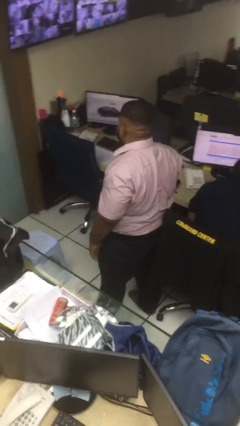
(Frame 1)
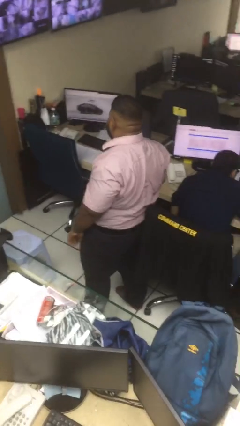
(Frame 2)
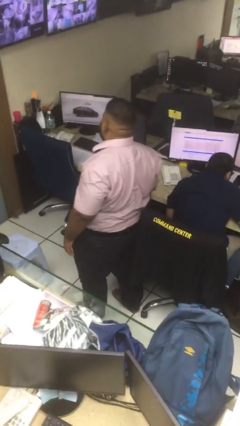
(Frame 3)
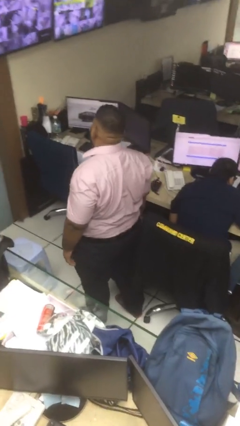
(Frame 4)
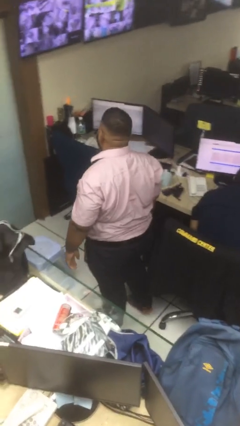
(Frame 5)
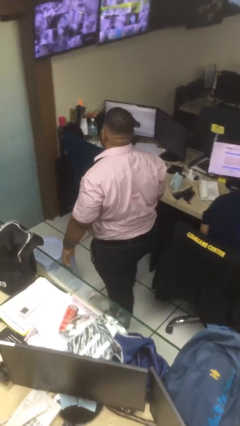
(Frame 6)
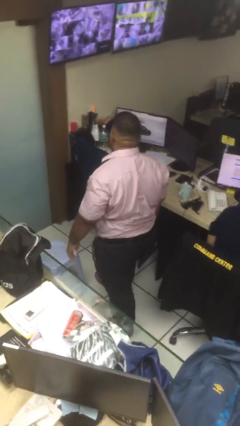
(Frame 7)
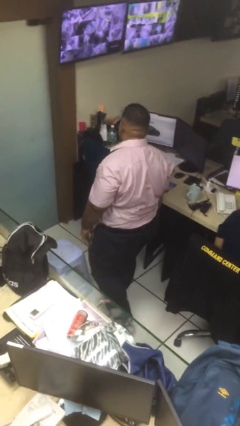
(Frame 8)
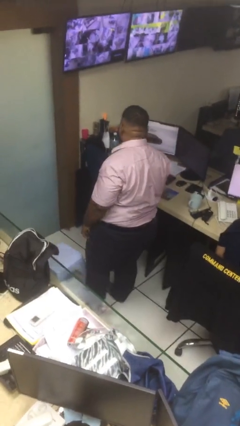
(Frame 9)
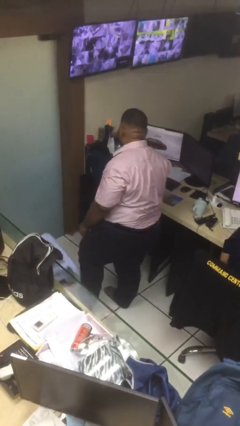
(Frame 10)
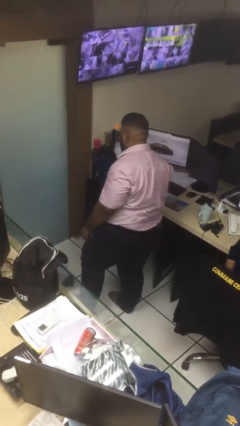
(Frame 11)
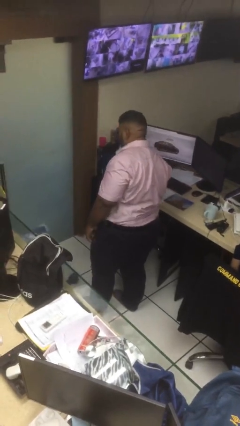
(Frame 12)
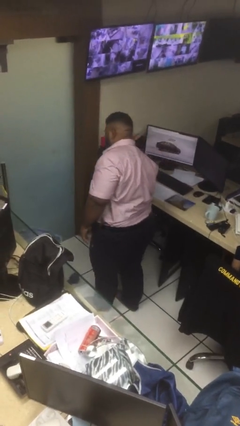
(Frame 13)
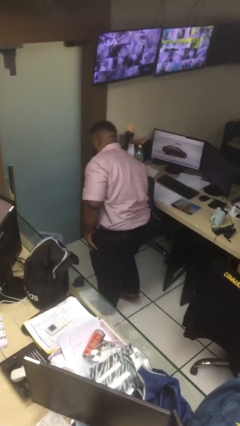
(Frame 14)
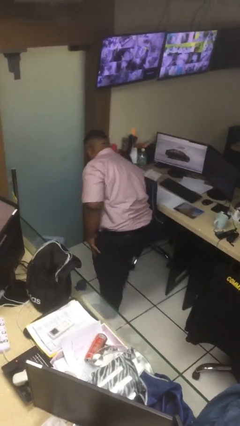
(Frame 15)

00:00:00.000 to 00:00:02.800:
person knocks over furniture

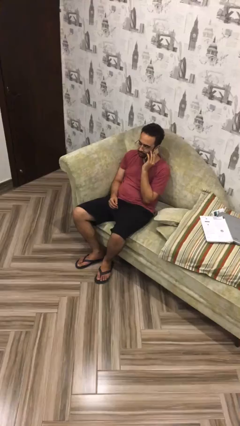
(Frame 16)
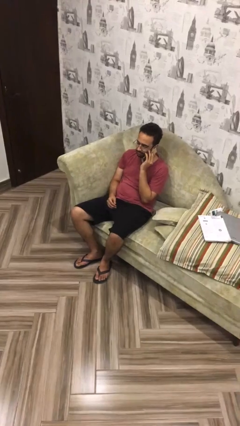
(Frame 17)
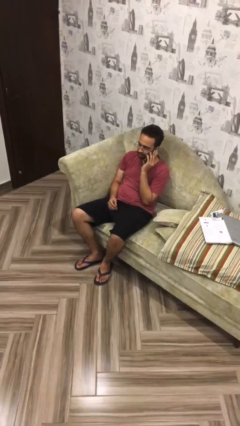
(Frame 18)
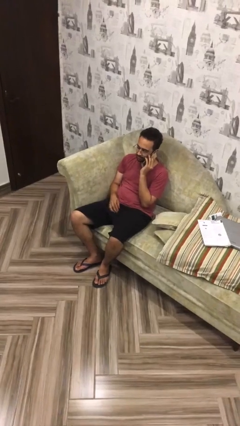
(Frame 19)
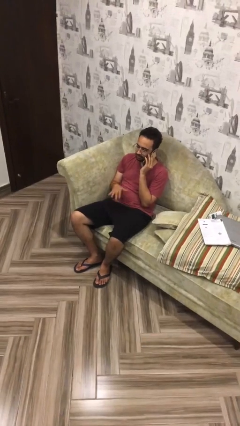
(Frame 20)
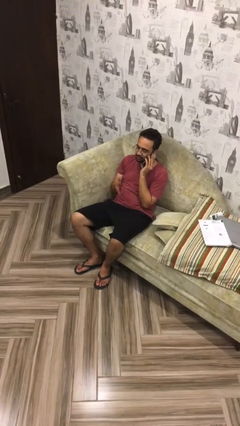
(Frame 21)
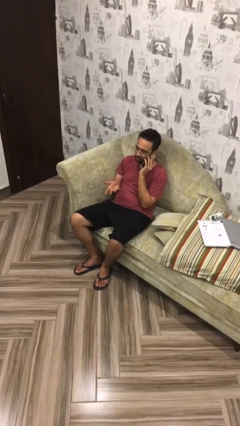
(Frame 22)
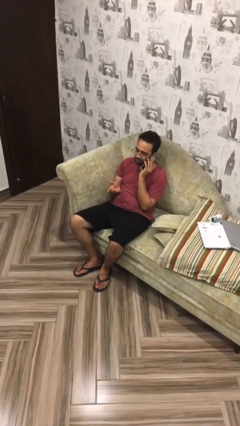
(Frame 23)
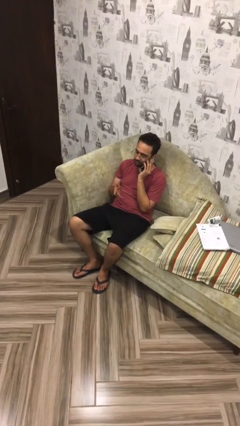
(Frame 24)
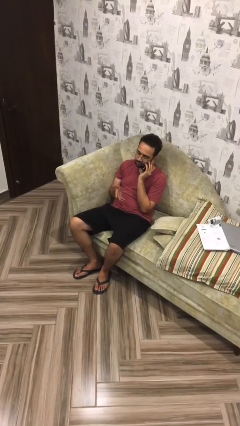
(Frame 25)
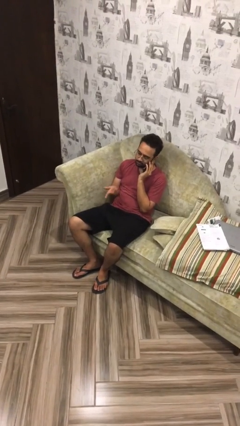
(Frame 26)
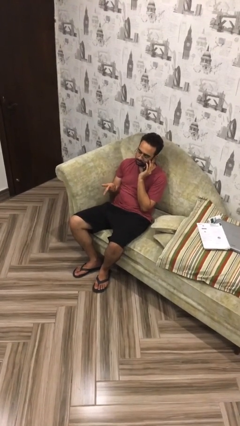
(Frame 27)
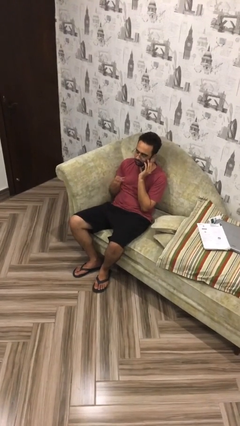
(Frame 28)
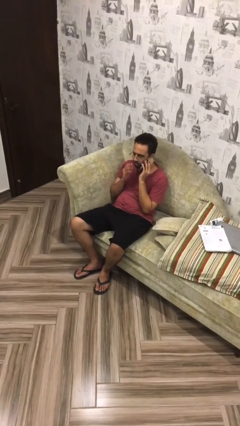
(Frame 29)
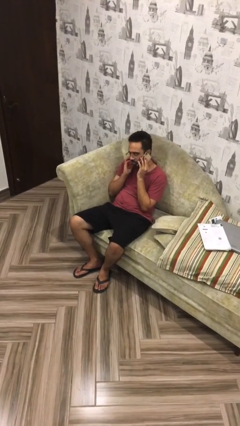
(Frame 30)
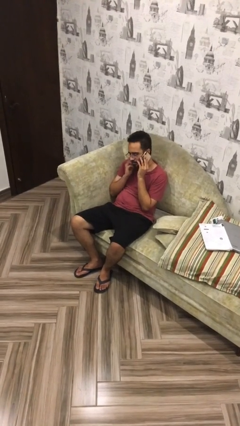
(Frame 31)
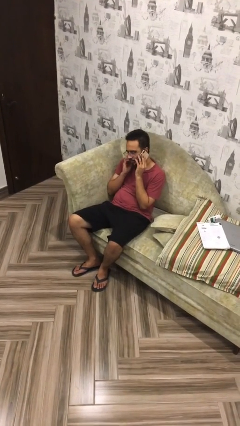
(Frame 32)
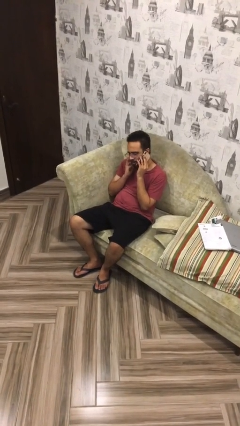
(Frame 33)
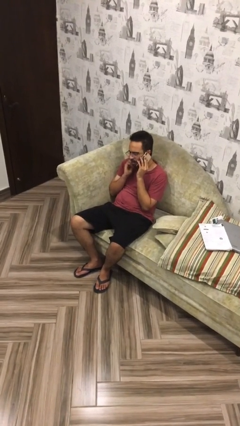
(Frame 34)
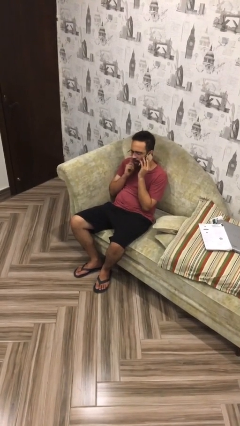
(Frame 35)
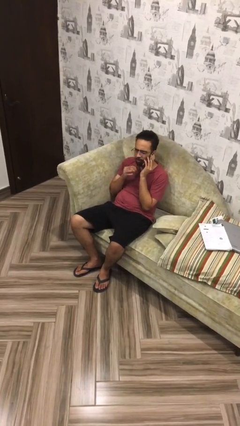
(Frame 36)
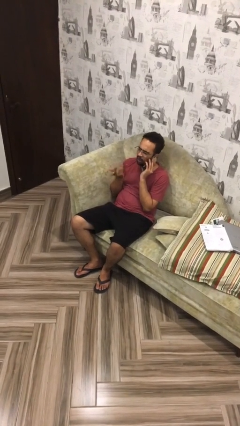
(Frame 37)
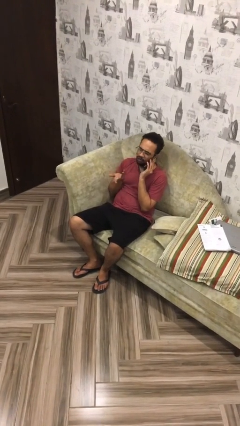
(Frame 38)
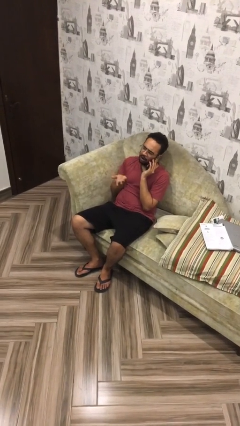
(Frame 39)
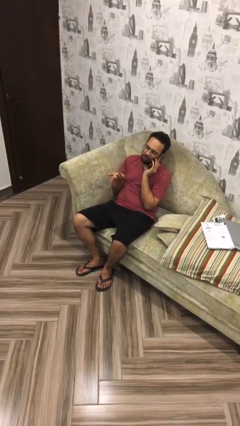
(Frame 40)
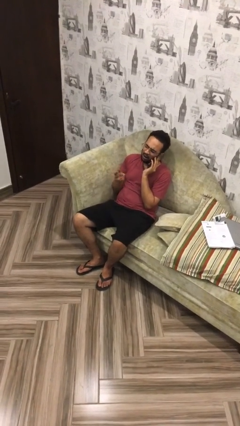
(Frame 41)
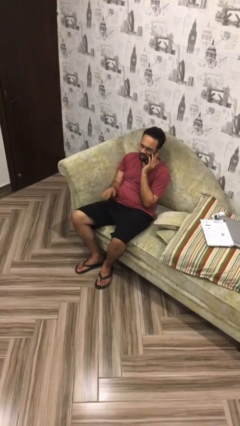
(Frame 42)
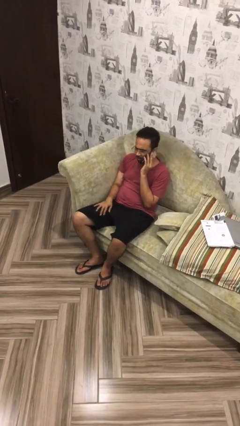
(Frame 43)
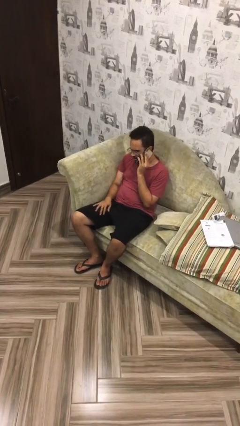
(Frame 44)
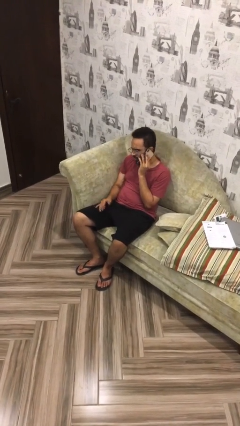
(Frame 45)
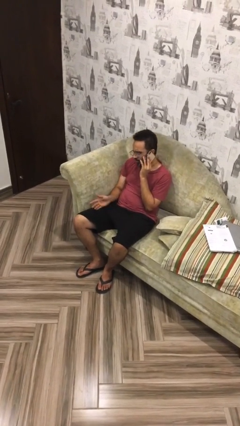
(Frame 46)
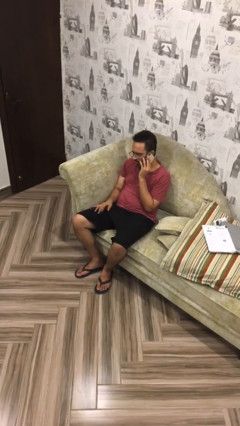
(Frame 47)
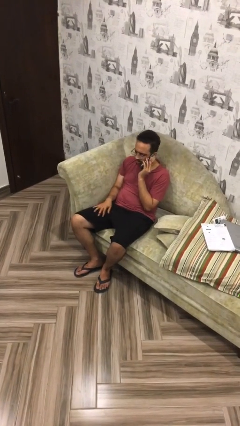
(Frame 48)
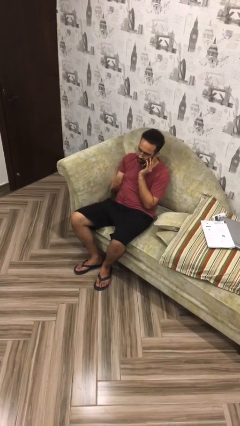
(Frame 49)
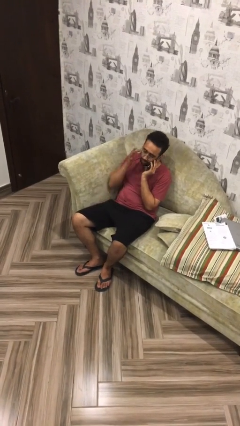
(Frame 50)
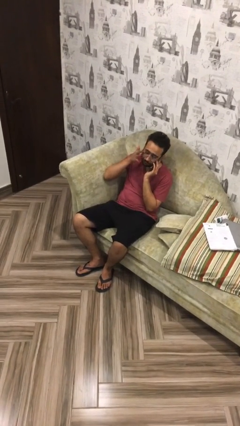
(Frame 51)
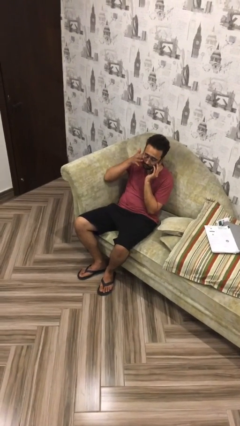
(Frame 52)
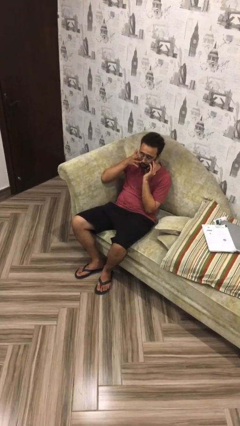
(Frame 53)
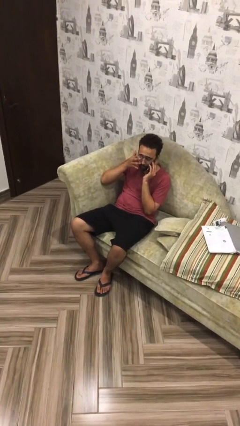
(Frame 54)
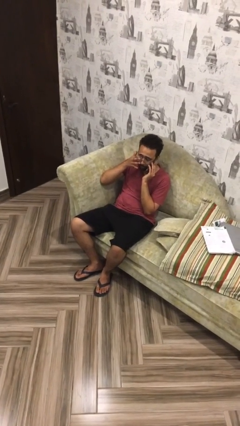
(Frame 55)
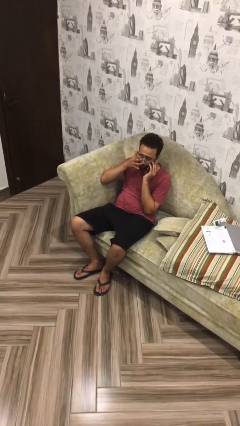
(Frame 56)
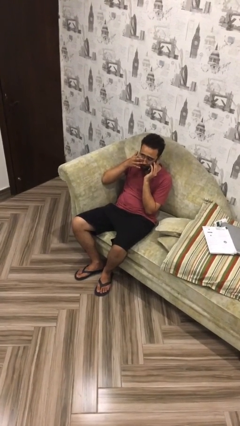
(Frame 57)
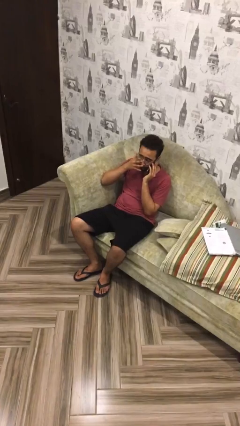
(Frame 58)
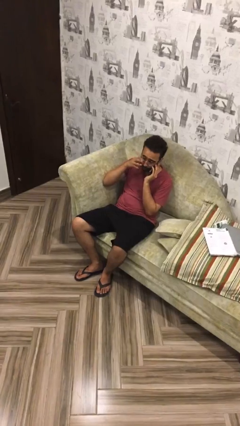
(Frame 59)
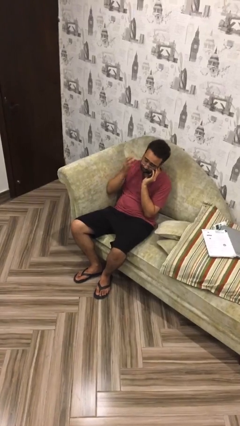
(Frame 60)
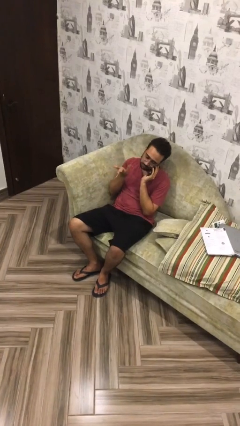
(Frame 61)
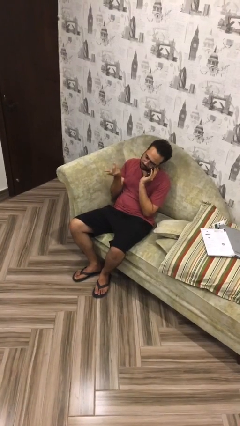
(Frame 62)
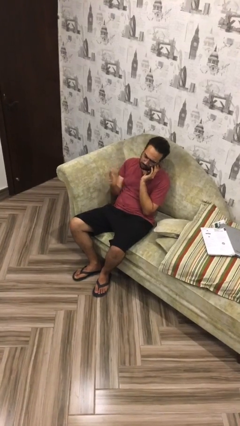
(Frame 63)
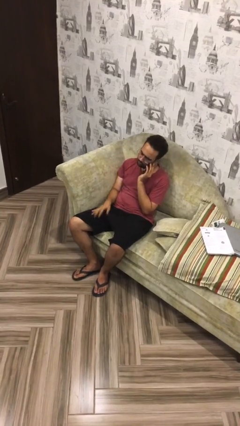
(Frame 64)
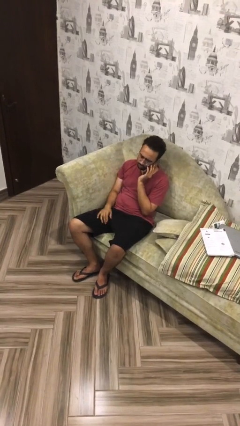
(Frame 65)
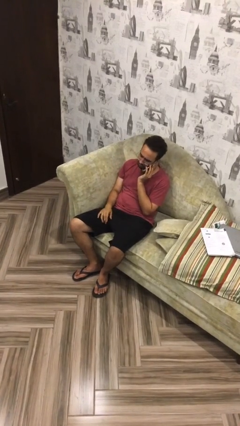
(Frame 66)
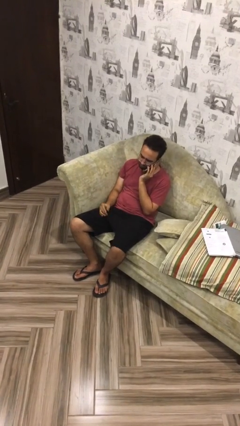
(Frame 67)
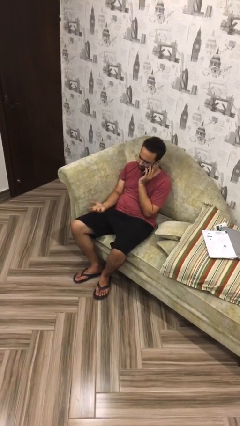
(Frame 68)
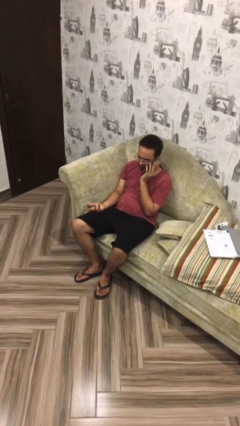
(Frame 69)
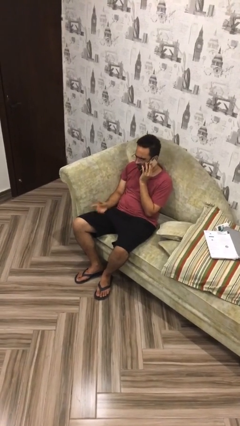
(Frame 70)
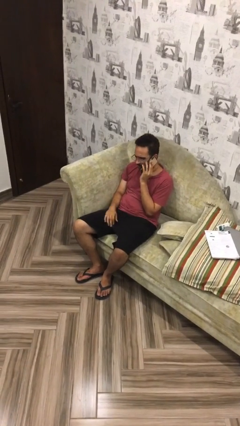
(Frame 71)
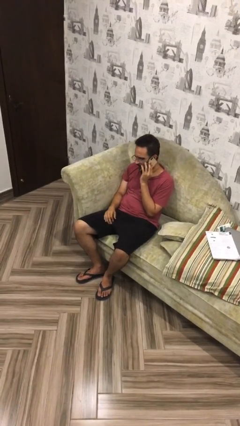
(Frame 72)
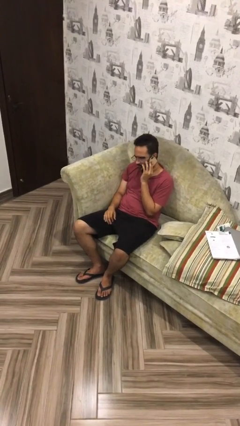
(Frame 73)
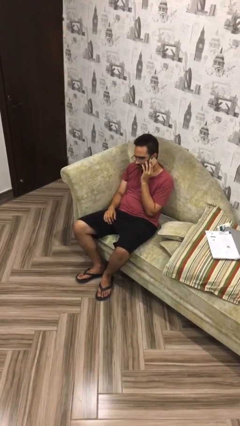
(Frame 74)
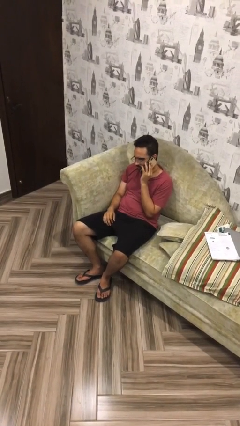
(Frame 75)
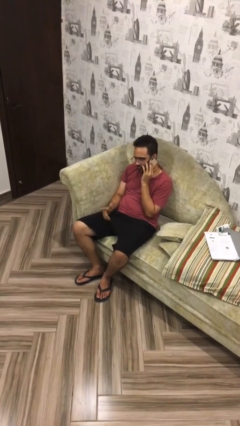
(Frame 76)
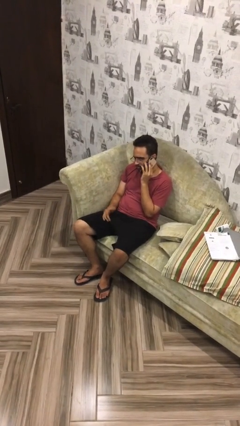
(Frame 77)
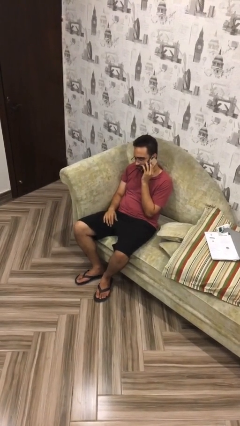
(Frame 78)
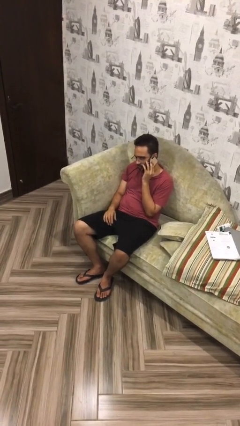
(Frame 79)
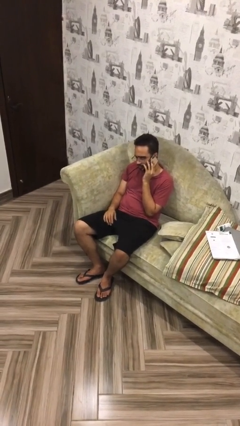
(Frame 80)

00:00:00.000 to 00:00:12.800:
person talks on phone

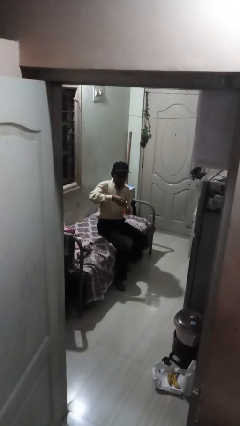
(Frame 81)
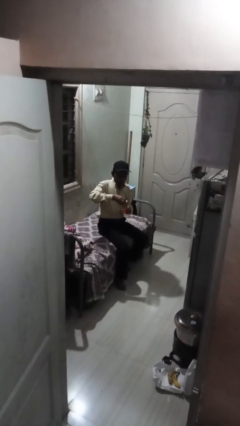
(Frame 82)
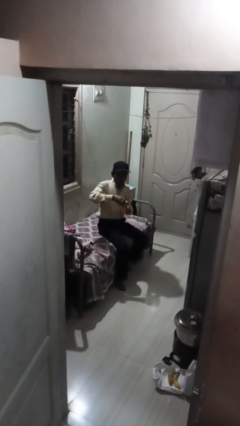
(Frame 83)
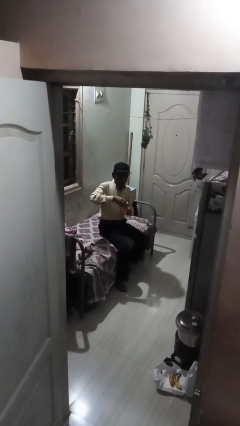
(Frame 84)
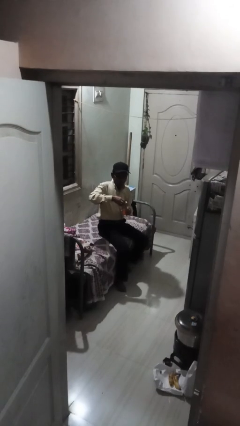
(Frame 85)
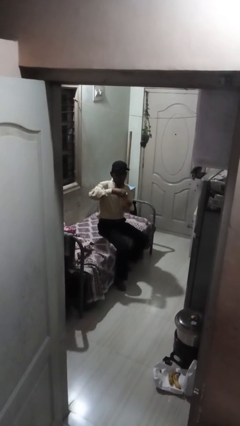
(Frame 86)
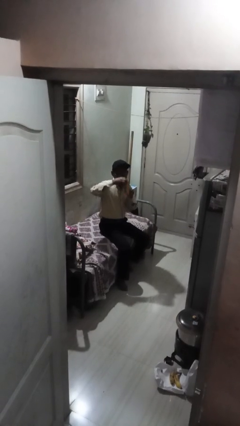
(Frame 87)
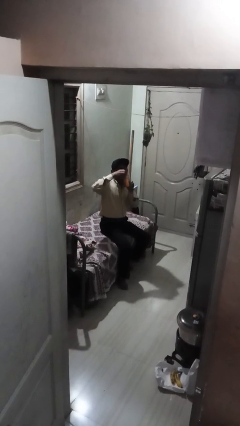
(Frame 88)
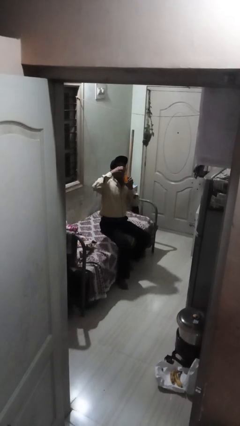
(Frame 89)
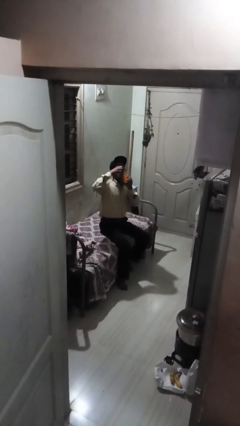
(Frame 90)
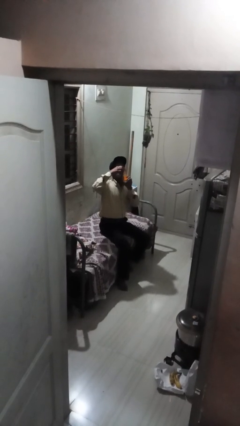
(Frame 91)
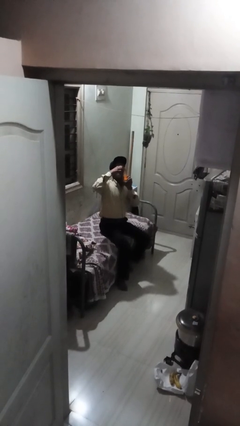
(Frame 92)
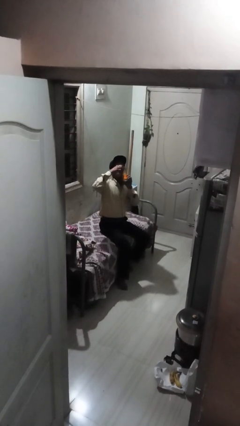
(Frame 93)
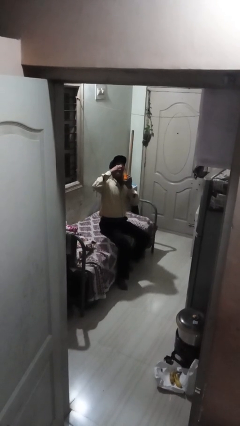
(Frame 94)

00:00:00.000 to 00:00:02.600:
person drinks from beverage can
